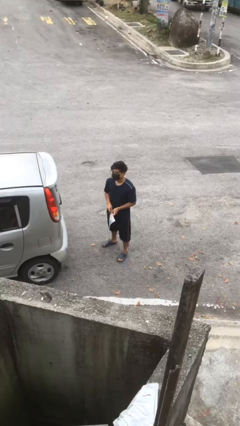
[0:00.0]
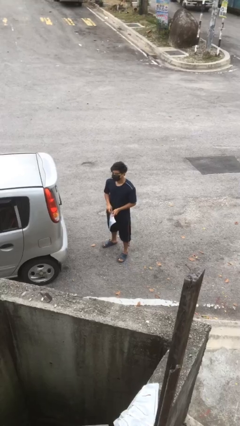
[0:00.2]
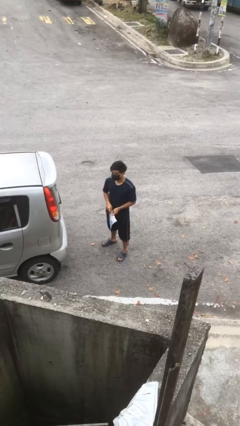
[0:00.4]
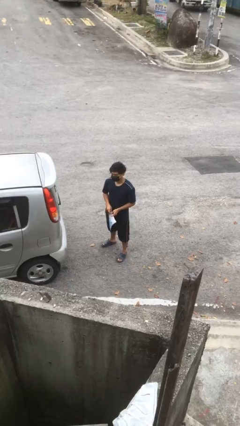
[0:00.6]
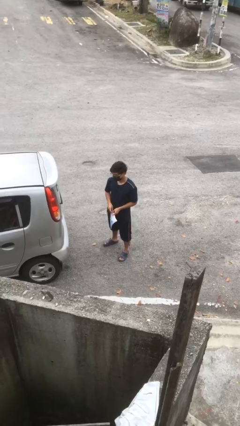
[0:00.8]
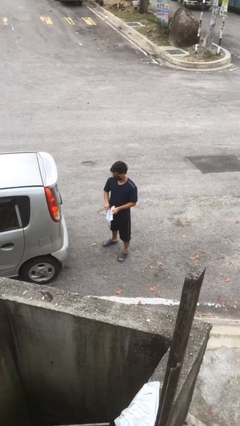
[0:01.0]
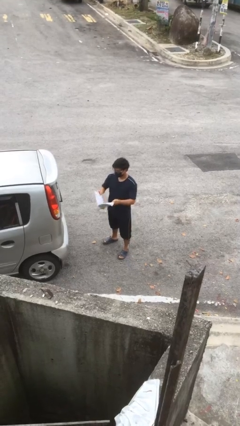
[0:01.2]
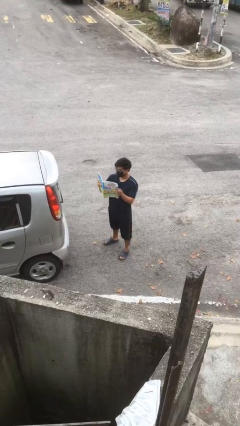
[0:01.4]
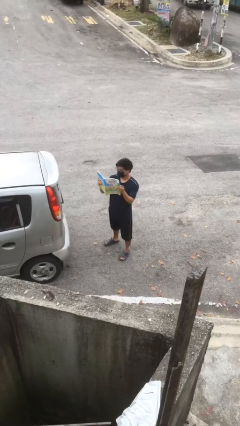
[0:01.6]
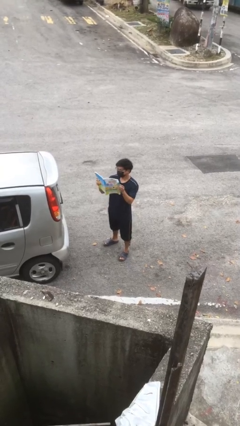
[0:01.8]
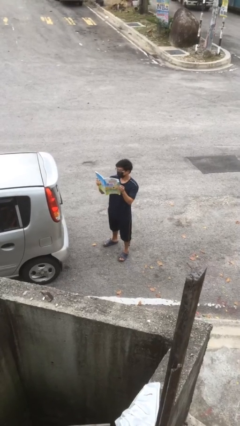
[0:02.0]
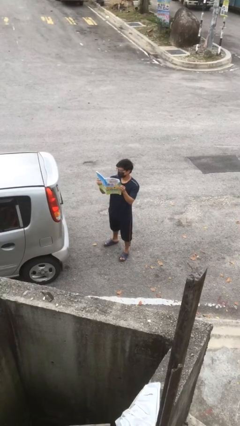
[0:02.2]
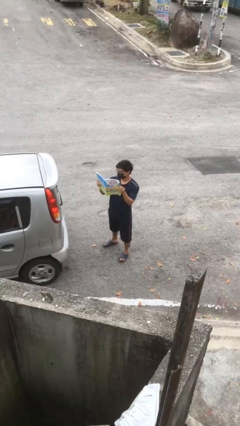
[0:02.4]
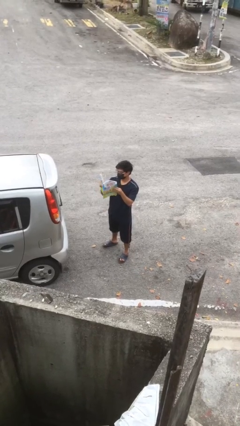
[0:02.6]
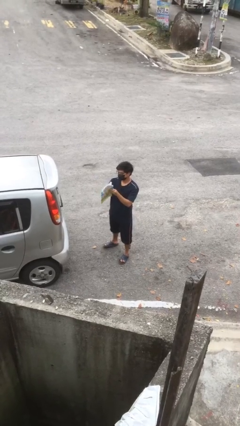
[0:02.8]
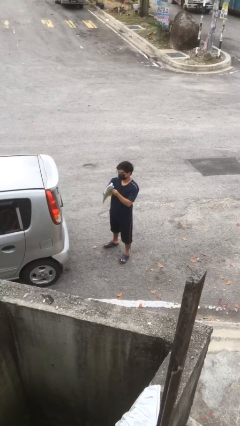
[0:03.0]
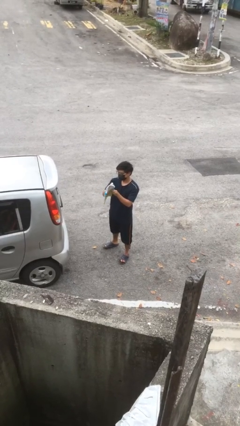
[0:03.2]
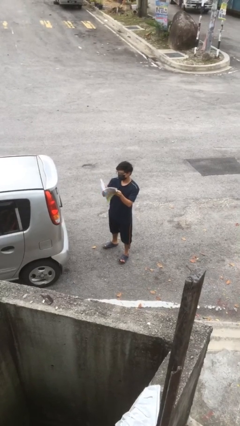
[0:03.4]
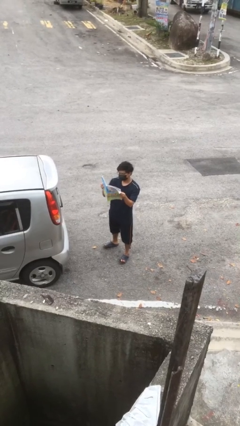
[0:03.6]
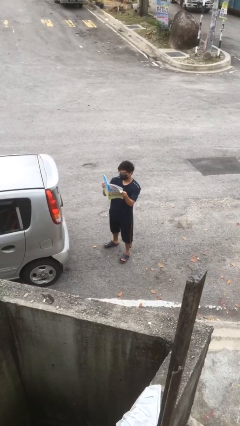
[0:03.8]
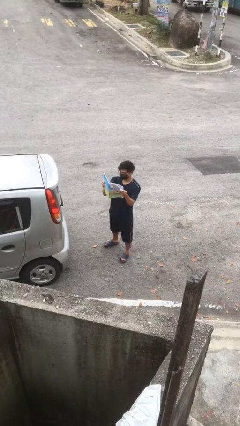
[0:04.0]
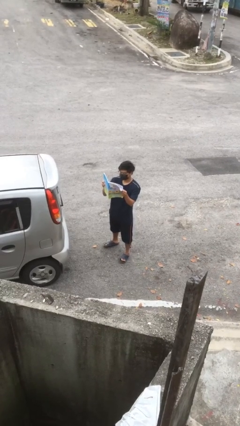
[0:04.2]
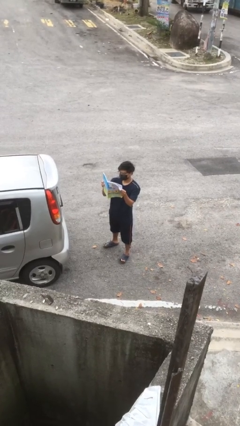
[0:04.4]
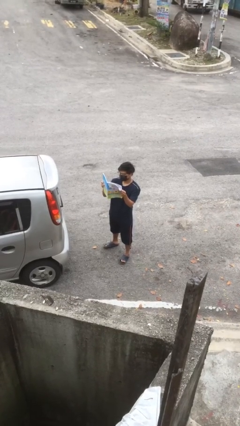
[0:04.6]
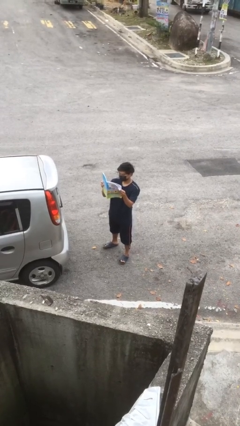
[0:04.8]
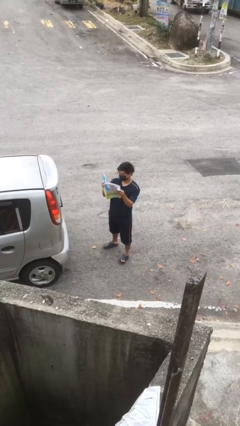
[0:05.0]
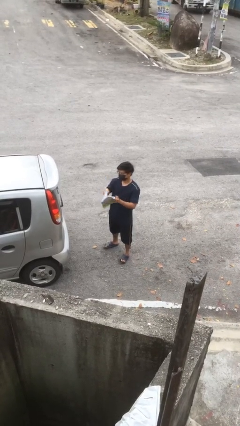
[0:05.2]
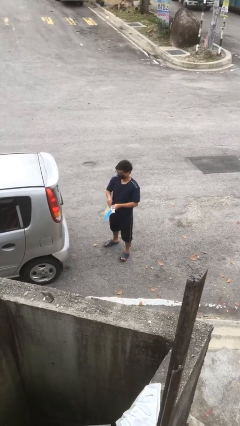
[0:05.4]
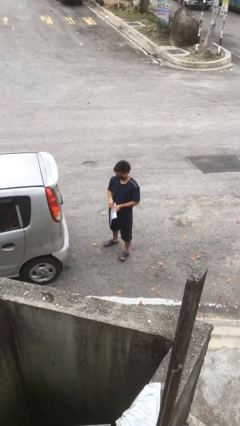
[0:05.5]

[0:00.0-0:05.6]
person reads document

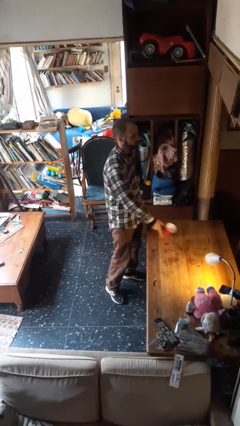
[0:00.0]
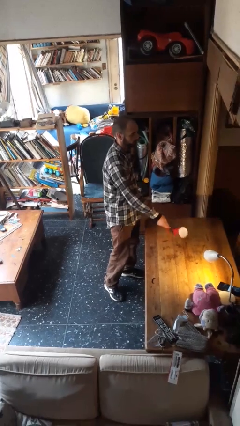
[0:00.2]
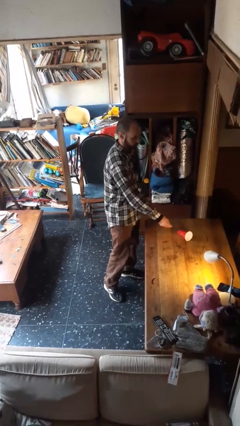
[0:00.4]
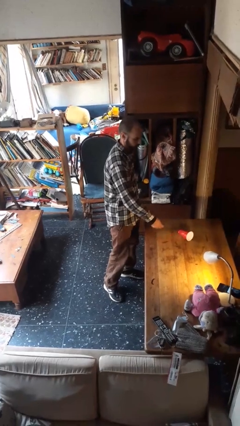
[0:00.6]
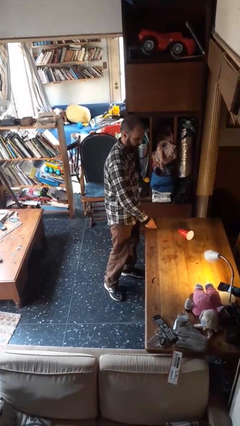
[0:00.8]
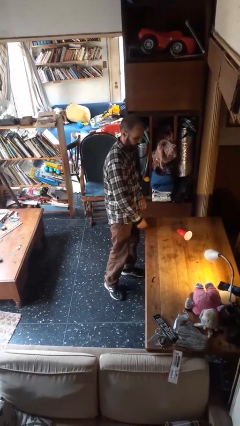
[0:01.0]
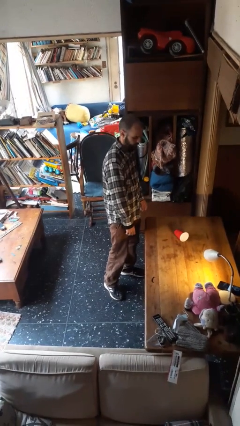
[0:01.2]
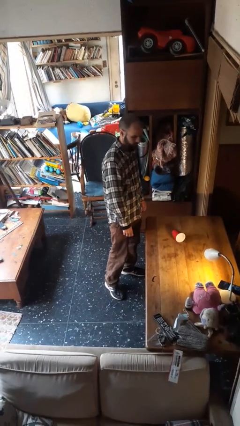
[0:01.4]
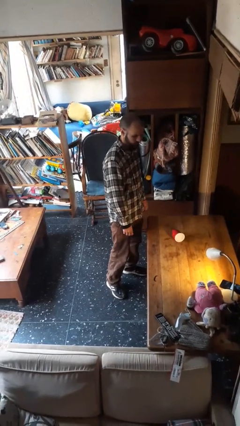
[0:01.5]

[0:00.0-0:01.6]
person knocks over glass

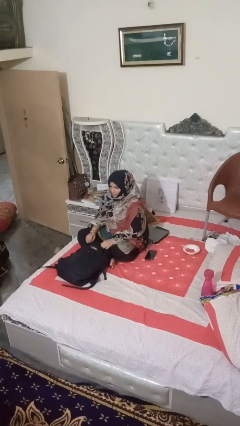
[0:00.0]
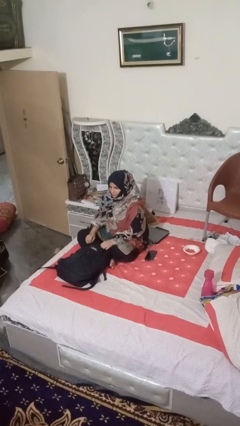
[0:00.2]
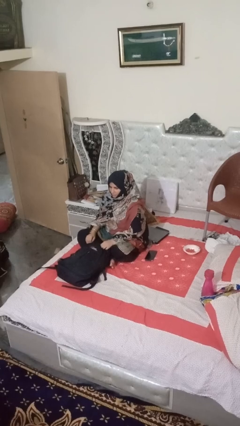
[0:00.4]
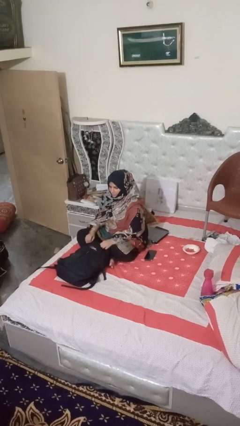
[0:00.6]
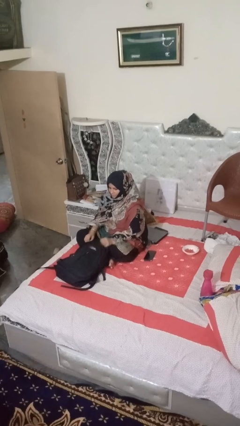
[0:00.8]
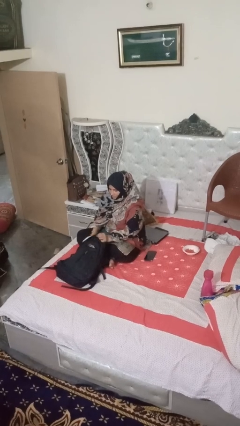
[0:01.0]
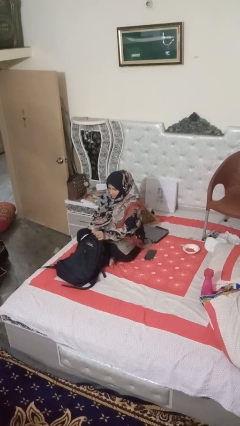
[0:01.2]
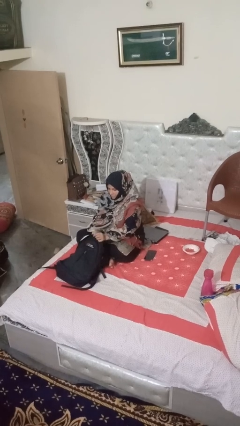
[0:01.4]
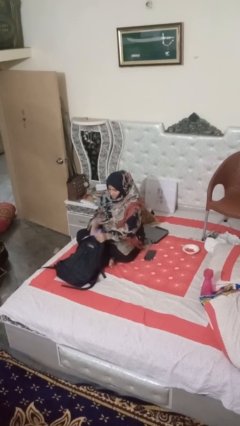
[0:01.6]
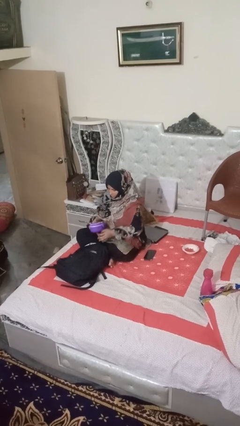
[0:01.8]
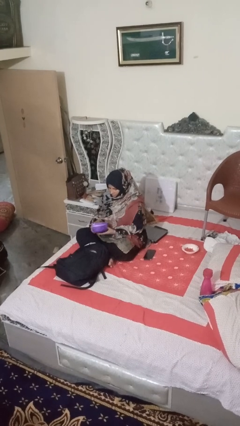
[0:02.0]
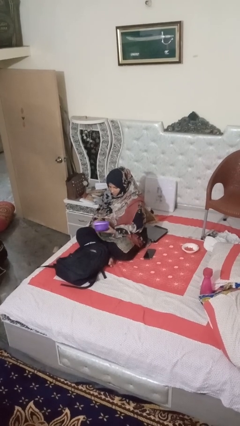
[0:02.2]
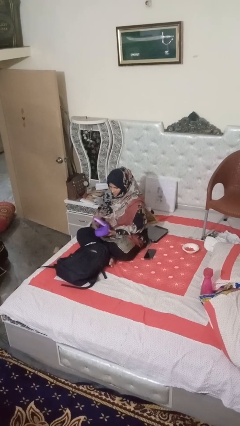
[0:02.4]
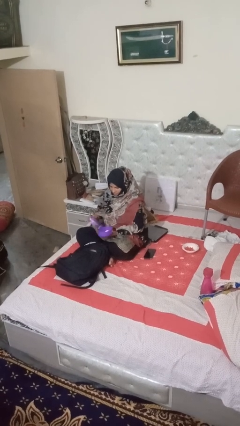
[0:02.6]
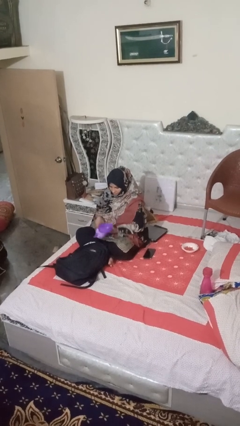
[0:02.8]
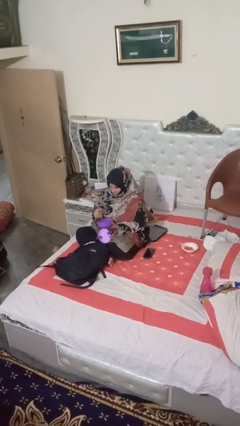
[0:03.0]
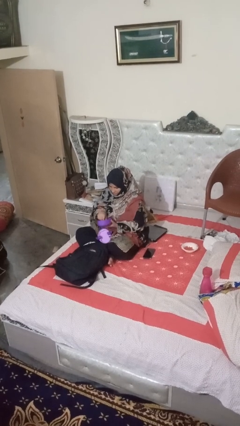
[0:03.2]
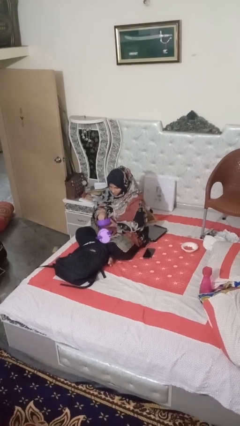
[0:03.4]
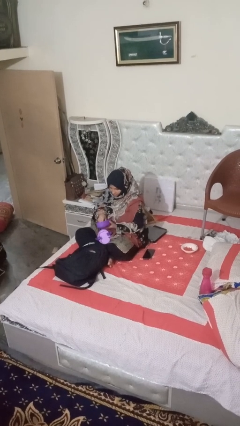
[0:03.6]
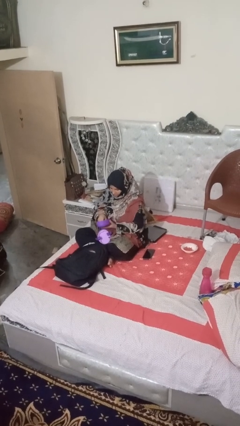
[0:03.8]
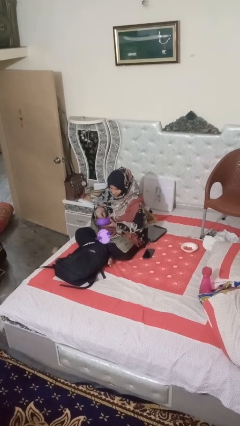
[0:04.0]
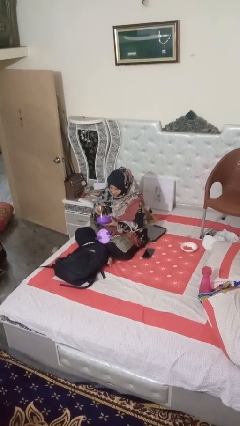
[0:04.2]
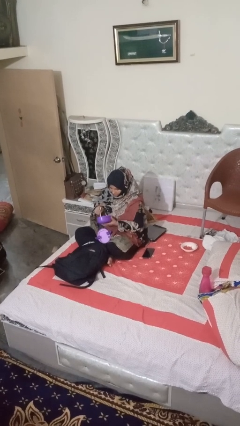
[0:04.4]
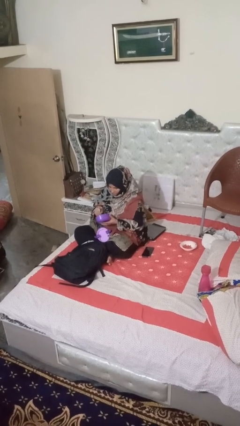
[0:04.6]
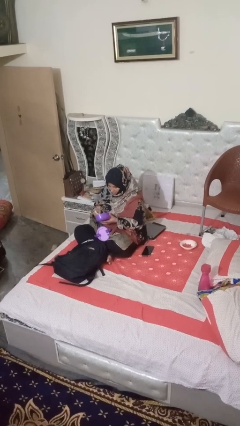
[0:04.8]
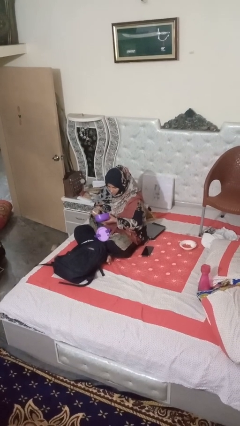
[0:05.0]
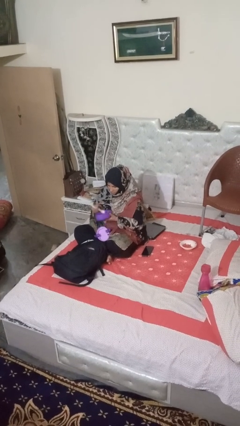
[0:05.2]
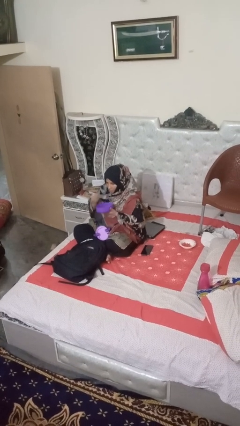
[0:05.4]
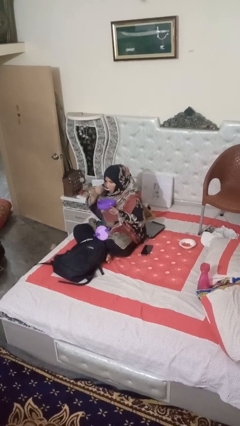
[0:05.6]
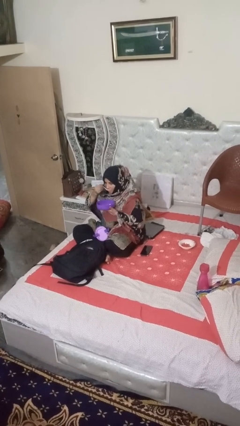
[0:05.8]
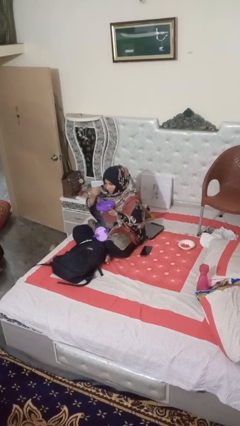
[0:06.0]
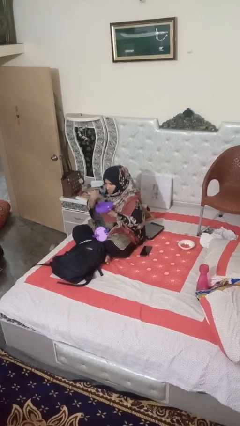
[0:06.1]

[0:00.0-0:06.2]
person eats snack from bag

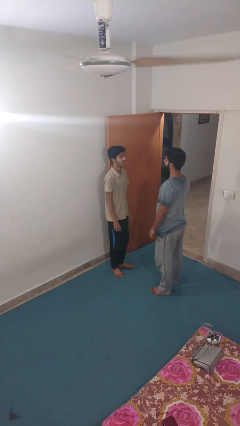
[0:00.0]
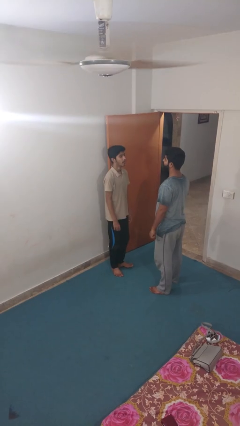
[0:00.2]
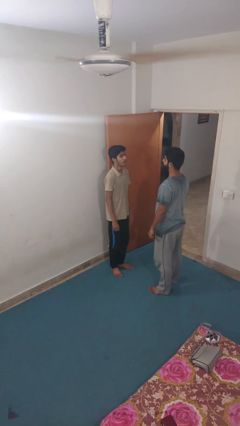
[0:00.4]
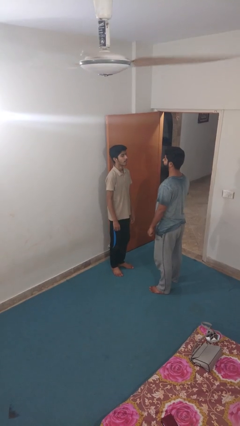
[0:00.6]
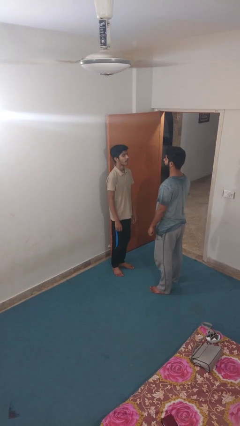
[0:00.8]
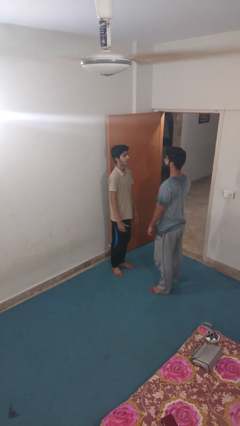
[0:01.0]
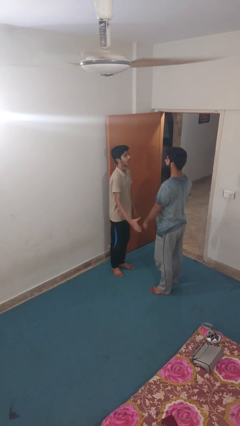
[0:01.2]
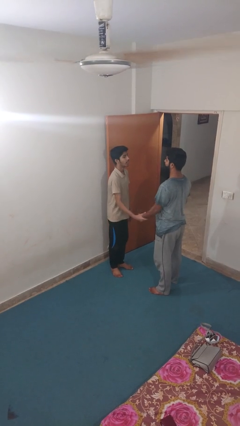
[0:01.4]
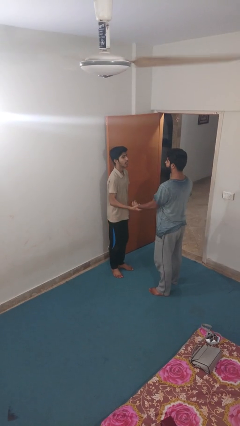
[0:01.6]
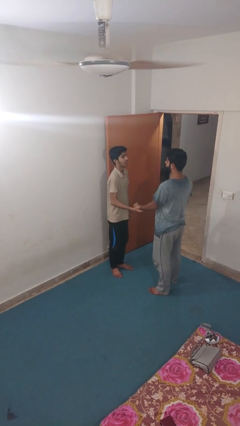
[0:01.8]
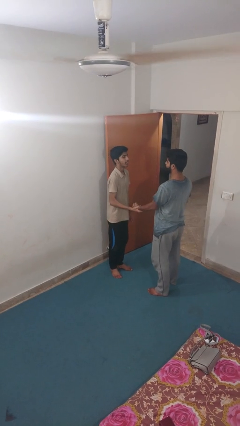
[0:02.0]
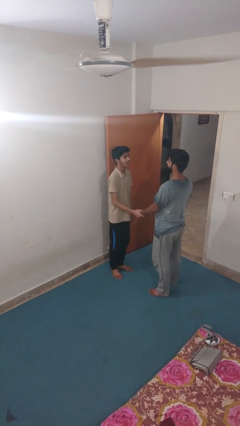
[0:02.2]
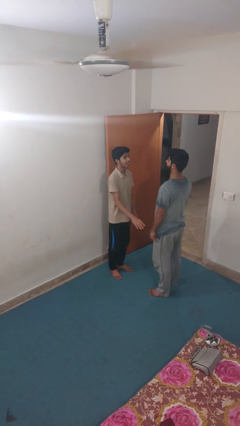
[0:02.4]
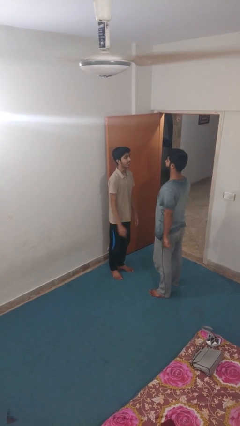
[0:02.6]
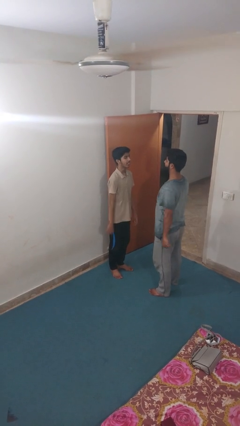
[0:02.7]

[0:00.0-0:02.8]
person grabs person by forearm

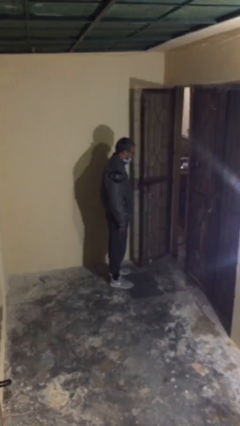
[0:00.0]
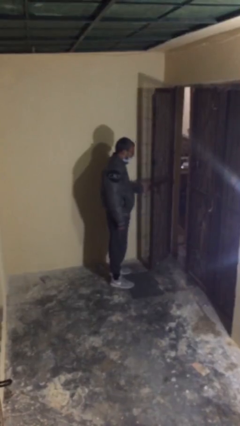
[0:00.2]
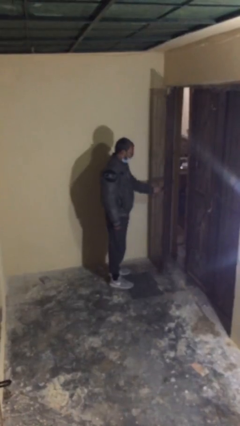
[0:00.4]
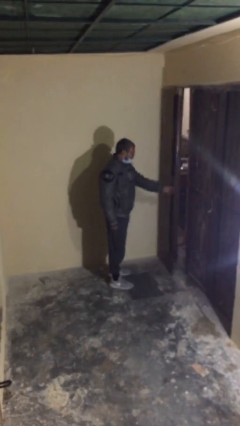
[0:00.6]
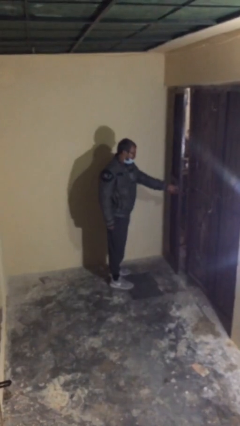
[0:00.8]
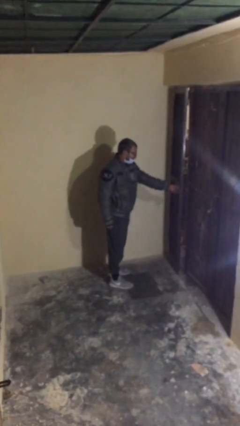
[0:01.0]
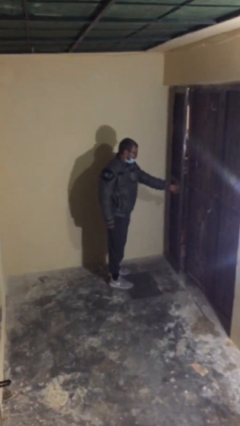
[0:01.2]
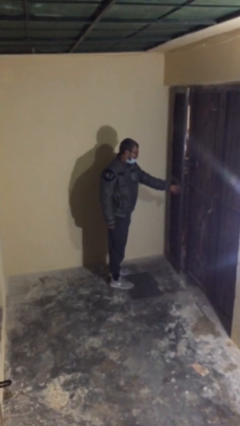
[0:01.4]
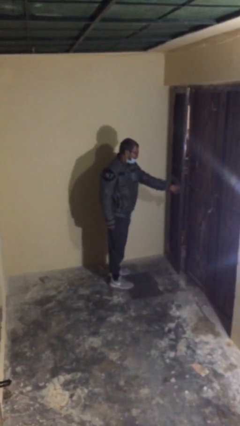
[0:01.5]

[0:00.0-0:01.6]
person closes facility door
